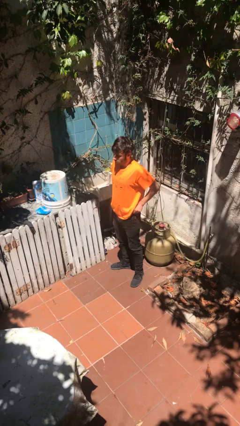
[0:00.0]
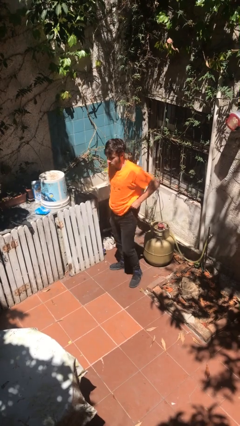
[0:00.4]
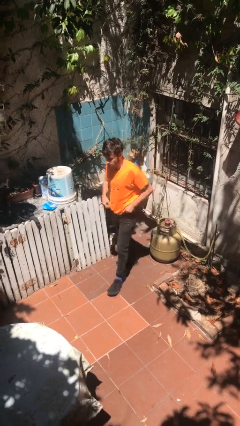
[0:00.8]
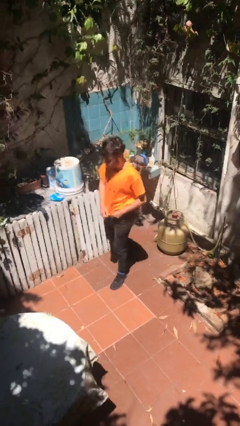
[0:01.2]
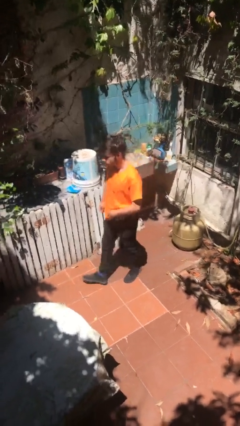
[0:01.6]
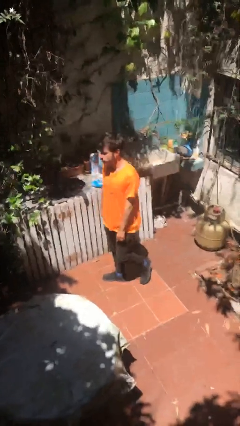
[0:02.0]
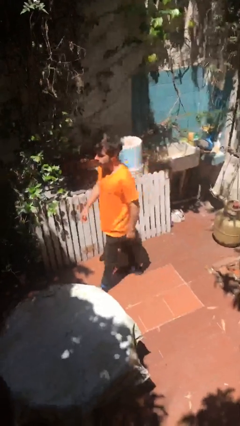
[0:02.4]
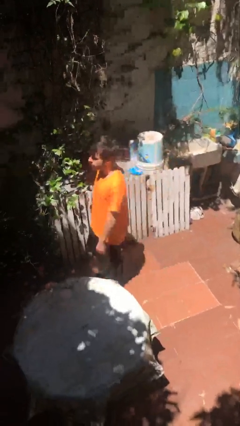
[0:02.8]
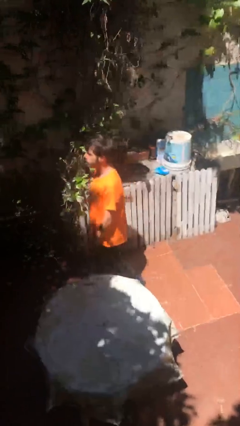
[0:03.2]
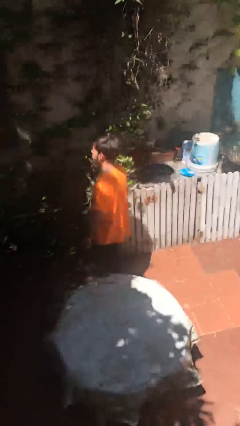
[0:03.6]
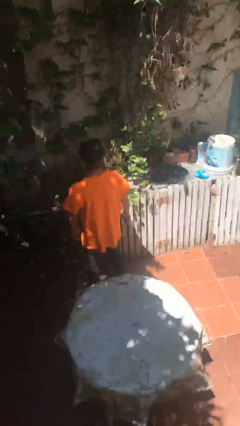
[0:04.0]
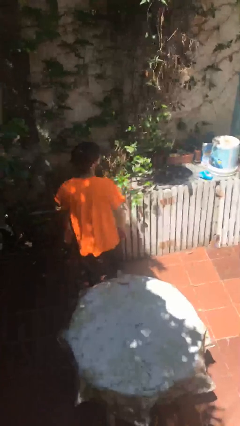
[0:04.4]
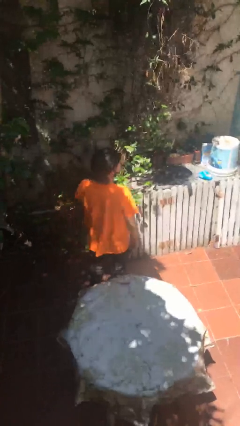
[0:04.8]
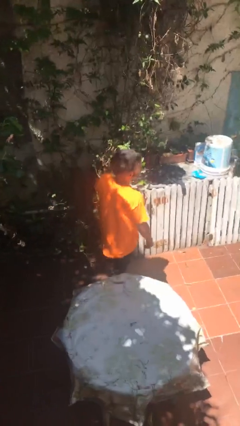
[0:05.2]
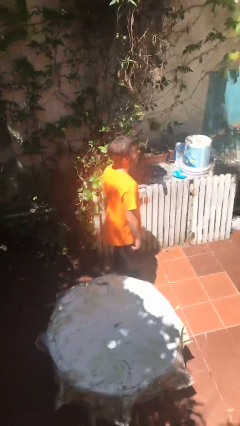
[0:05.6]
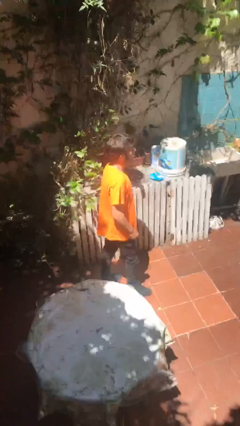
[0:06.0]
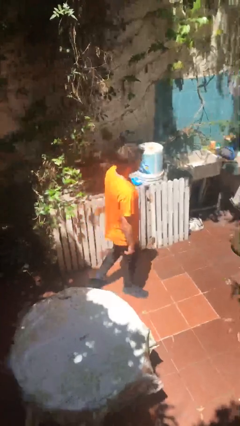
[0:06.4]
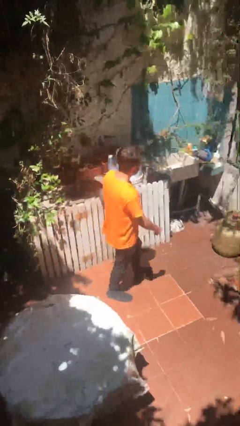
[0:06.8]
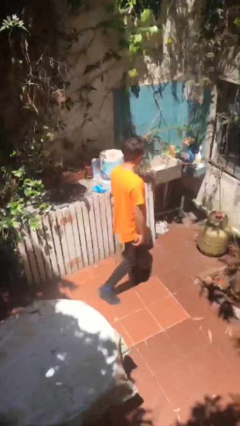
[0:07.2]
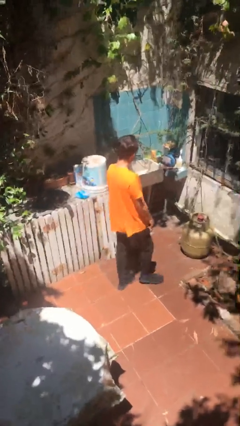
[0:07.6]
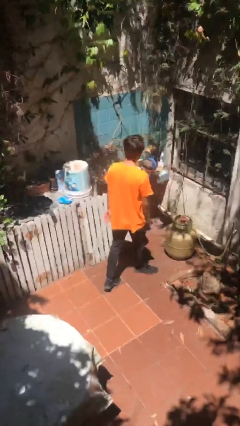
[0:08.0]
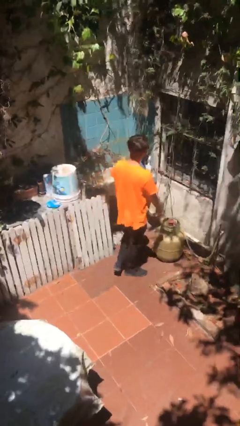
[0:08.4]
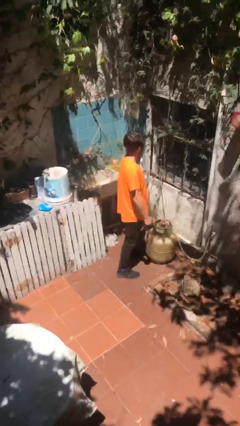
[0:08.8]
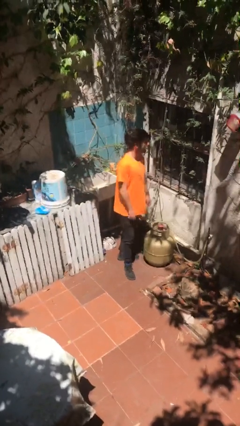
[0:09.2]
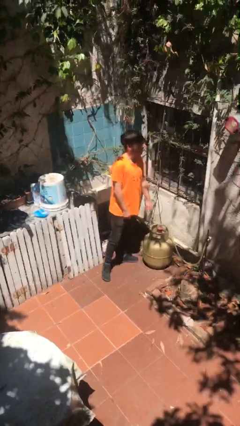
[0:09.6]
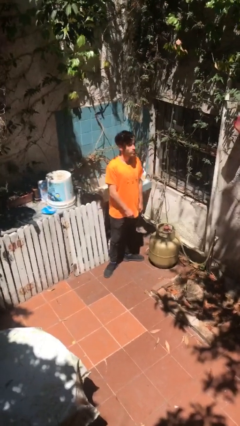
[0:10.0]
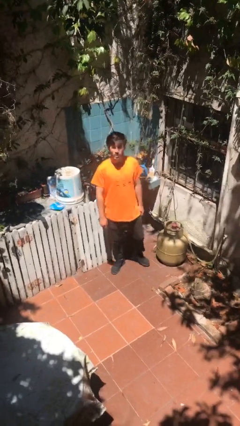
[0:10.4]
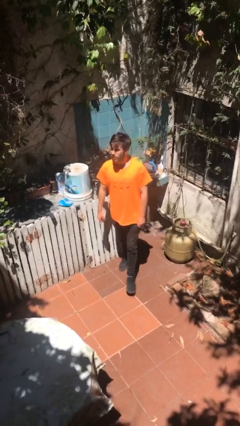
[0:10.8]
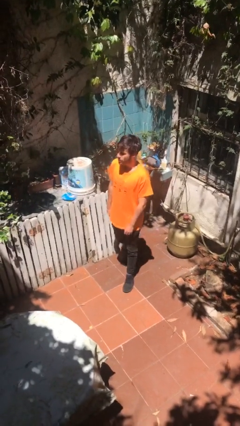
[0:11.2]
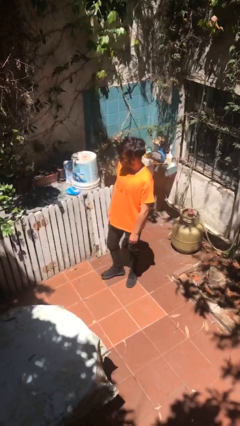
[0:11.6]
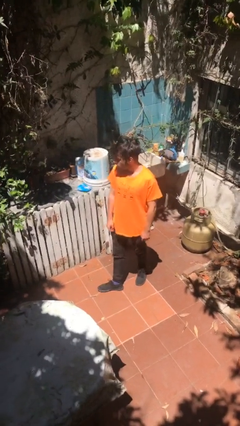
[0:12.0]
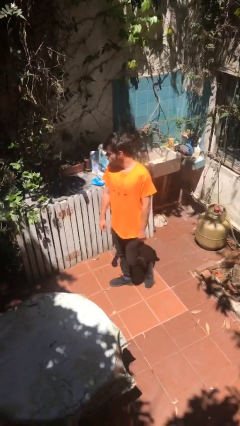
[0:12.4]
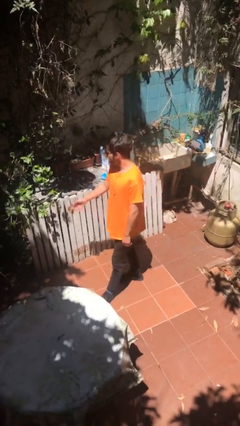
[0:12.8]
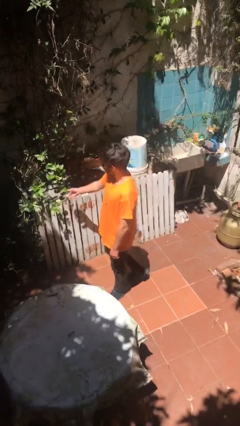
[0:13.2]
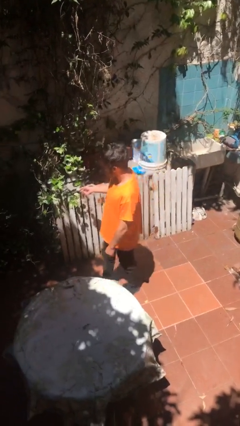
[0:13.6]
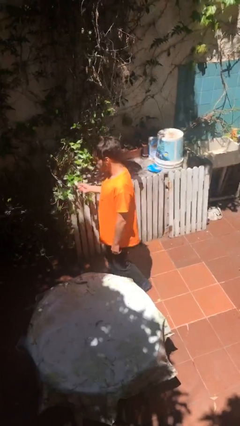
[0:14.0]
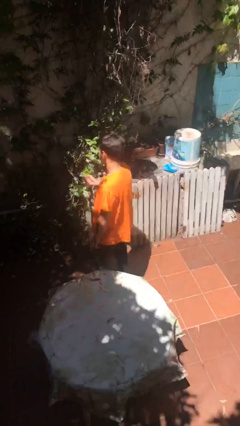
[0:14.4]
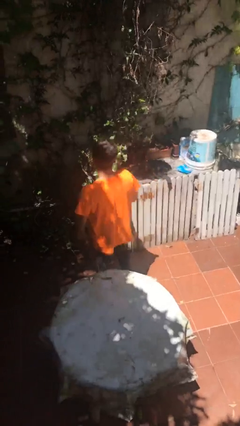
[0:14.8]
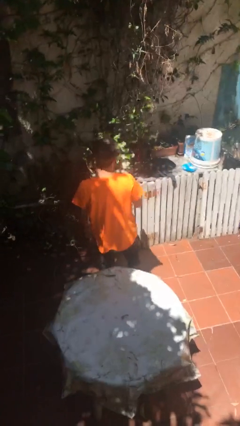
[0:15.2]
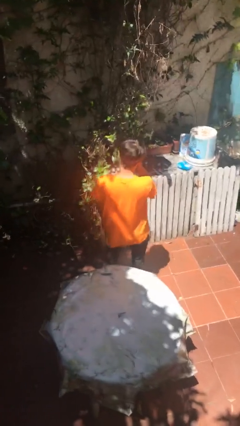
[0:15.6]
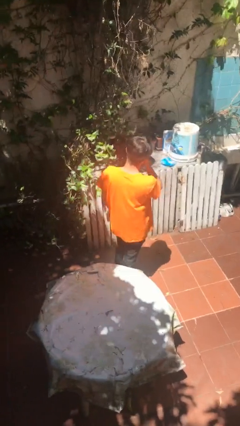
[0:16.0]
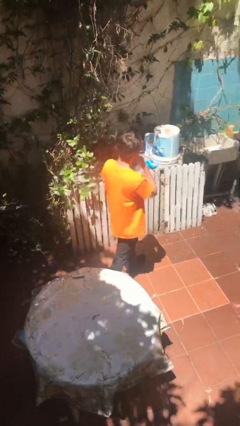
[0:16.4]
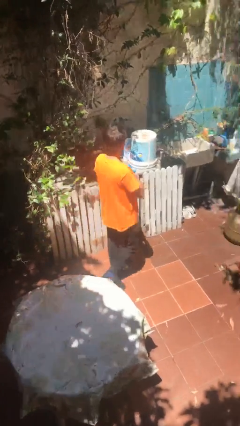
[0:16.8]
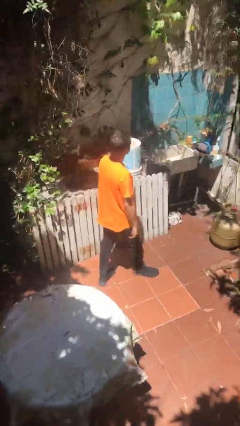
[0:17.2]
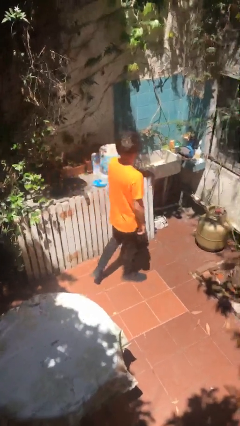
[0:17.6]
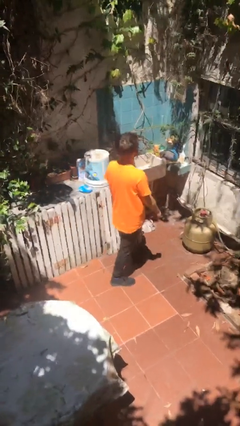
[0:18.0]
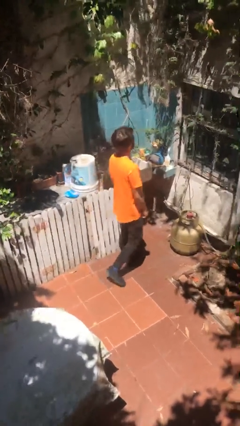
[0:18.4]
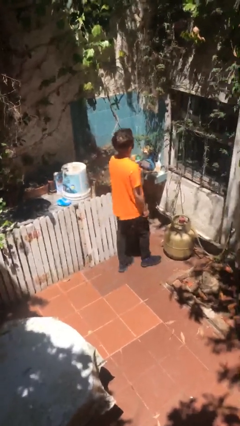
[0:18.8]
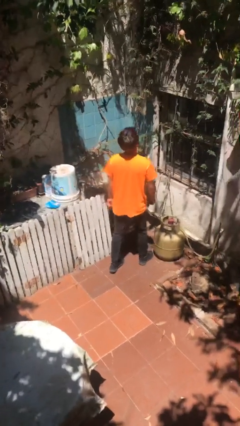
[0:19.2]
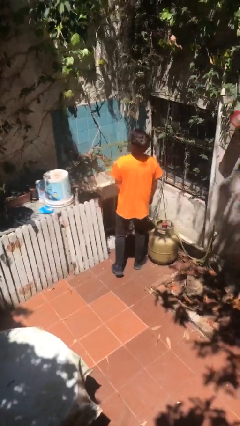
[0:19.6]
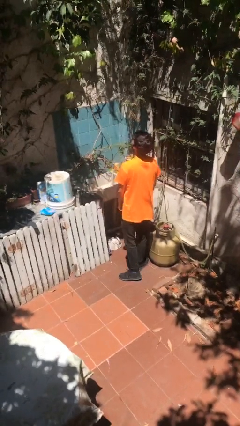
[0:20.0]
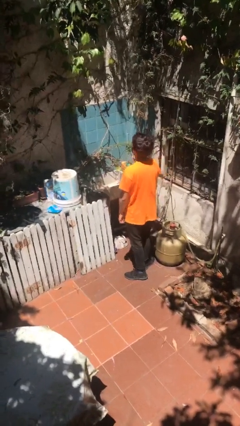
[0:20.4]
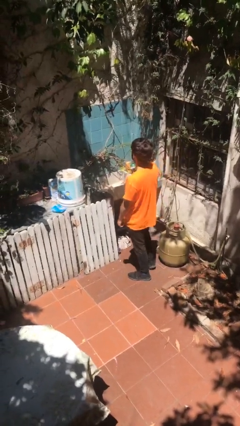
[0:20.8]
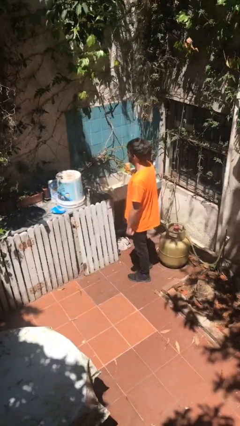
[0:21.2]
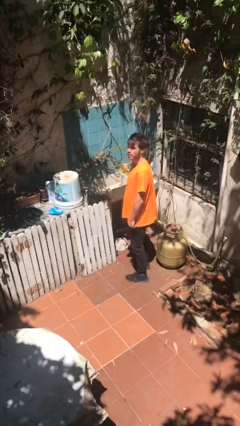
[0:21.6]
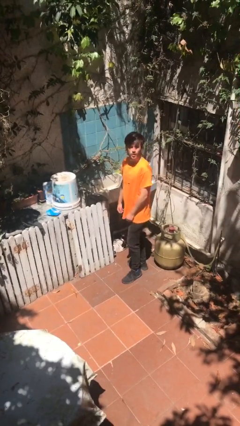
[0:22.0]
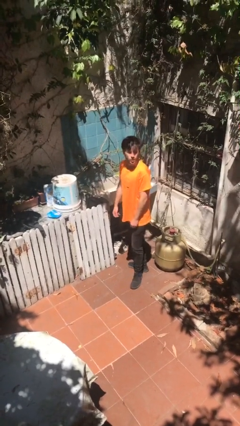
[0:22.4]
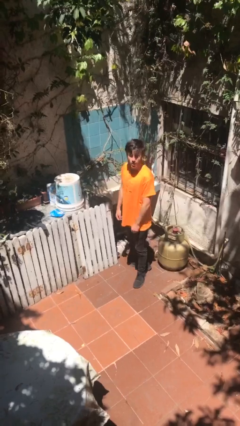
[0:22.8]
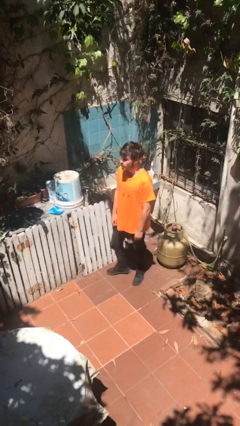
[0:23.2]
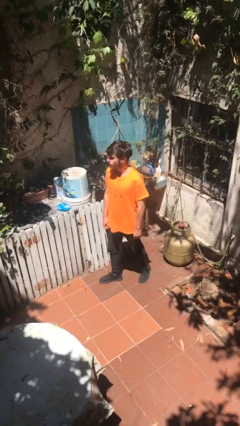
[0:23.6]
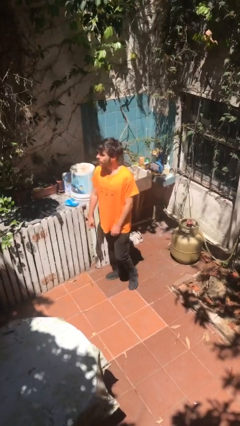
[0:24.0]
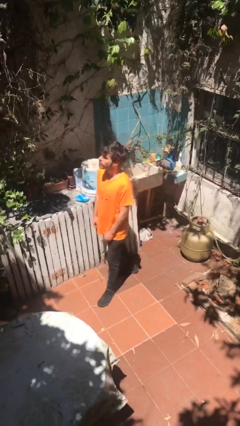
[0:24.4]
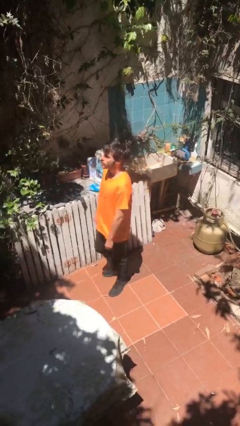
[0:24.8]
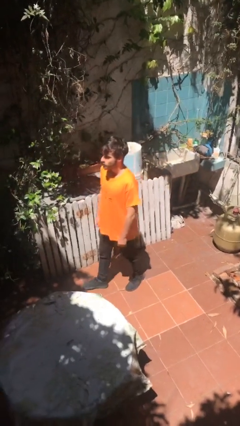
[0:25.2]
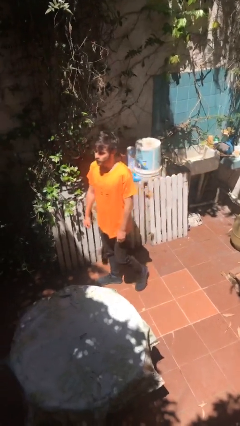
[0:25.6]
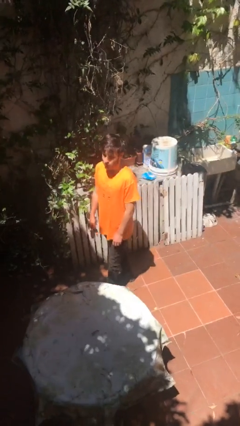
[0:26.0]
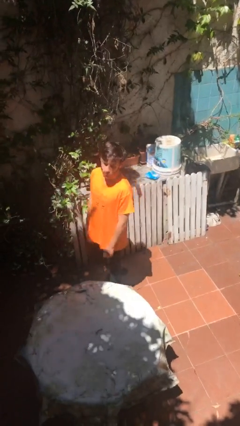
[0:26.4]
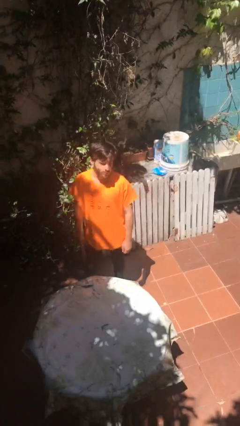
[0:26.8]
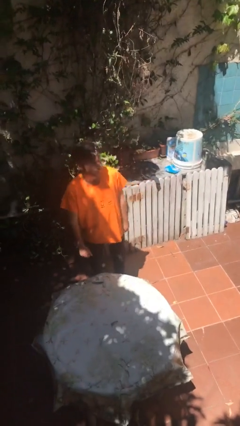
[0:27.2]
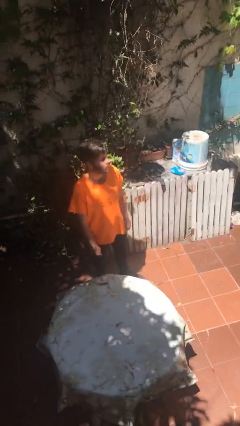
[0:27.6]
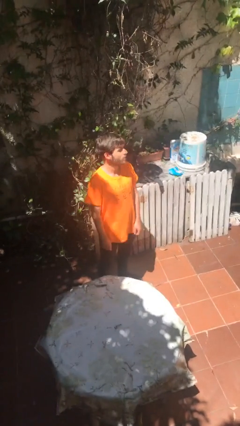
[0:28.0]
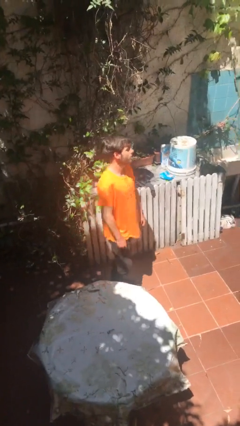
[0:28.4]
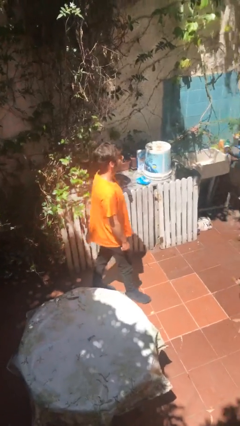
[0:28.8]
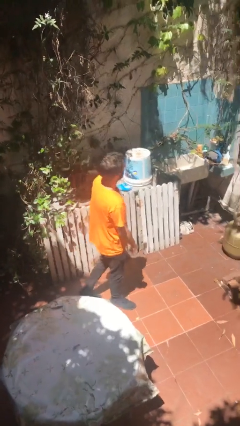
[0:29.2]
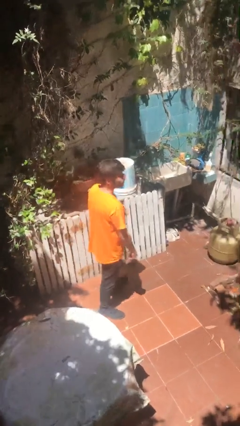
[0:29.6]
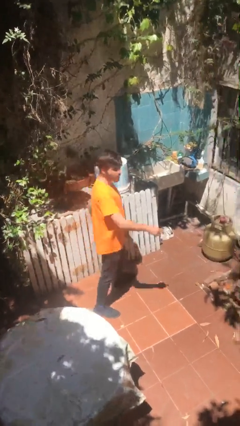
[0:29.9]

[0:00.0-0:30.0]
person walks

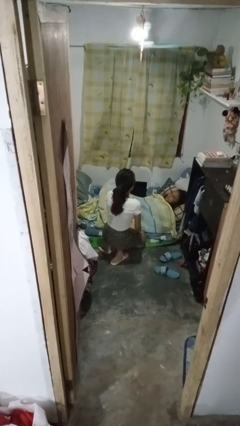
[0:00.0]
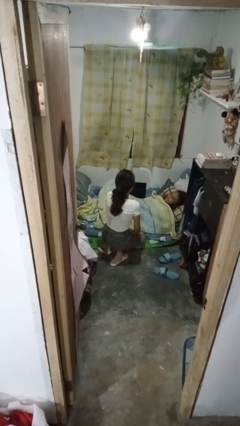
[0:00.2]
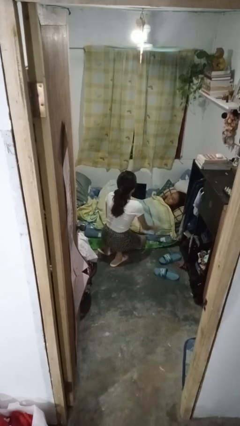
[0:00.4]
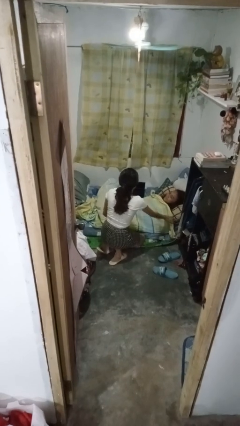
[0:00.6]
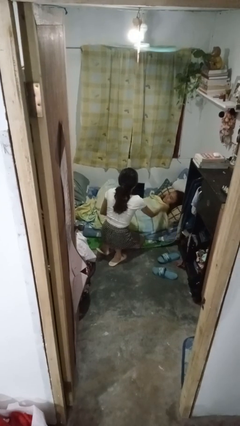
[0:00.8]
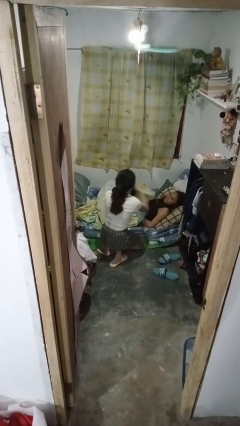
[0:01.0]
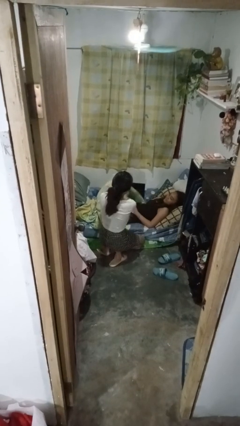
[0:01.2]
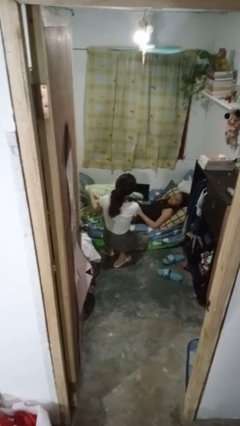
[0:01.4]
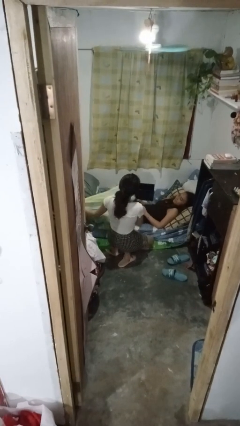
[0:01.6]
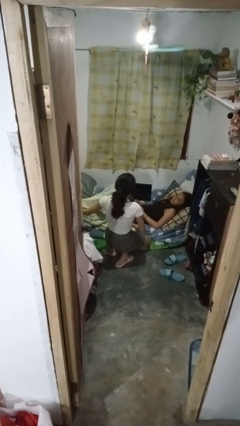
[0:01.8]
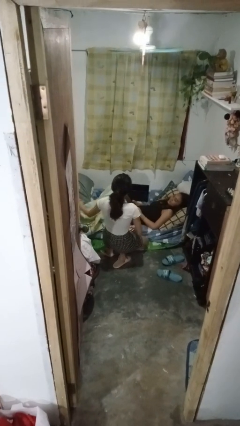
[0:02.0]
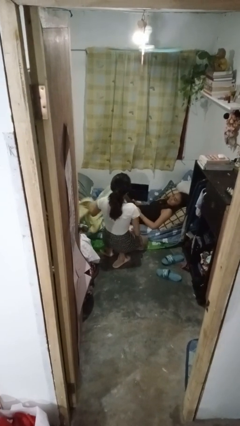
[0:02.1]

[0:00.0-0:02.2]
person uncovers friend with blanket

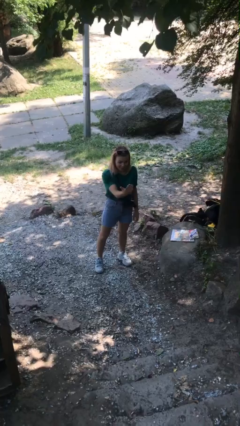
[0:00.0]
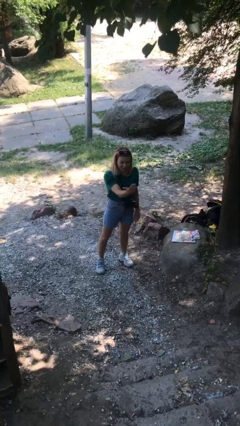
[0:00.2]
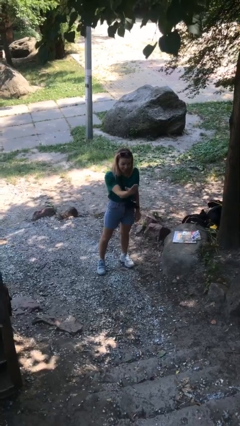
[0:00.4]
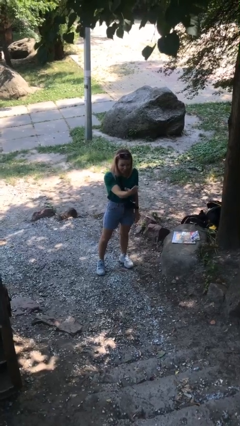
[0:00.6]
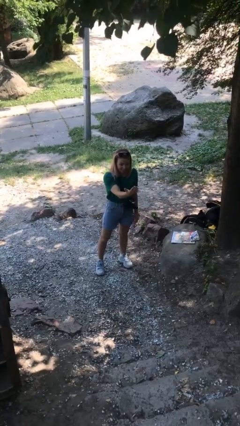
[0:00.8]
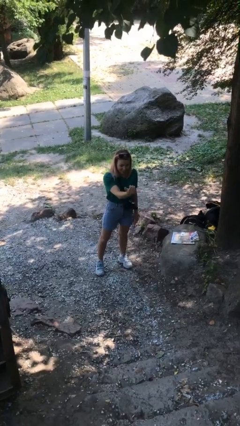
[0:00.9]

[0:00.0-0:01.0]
person gestures come here

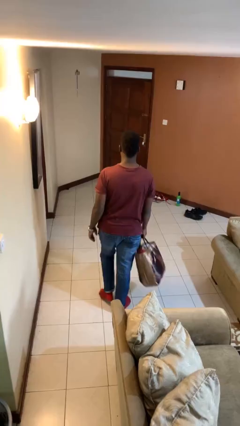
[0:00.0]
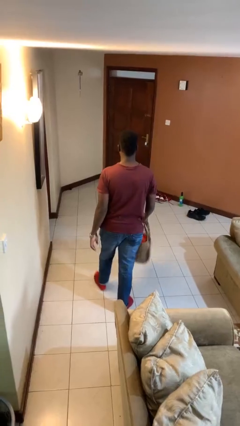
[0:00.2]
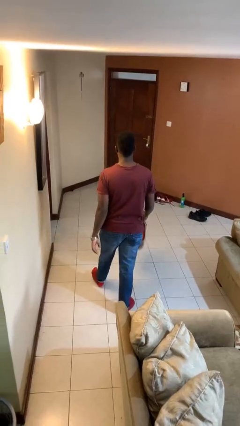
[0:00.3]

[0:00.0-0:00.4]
person carries groceries
